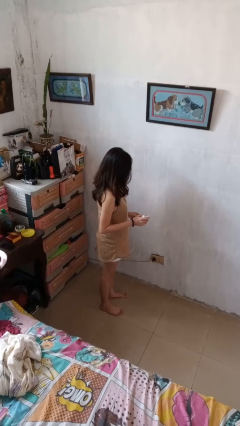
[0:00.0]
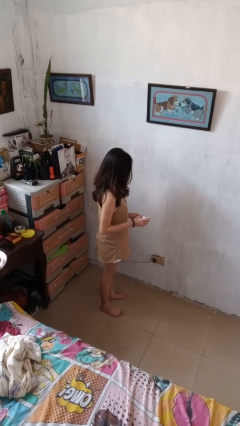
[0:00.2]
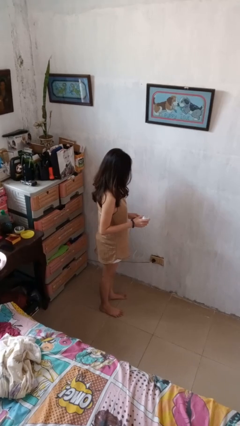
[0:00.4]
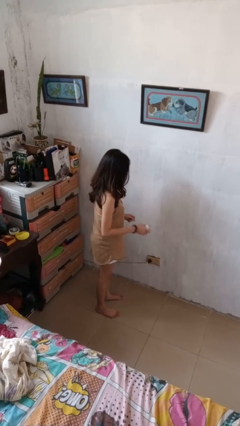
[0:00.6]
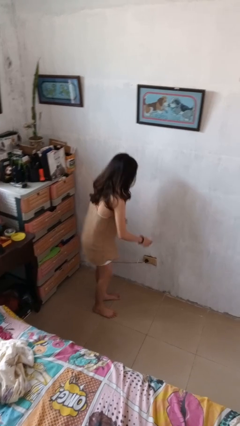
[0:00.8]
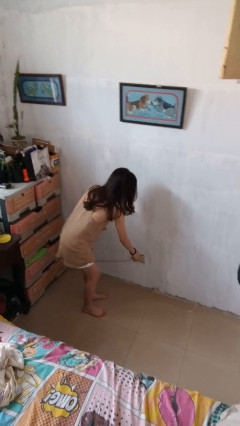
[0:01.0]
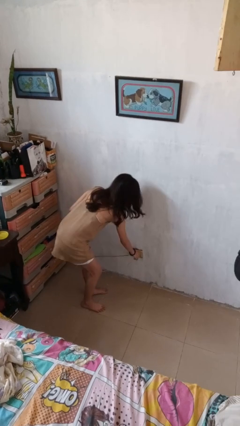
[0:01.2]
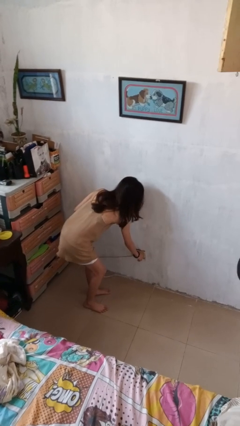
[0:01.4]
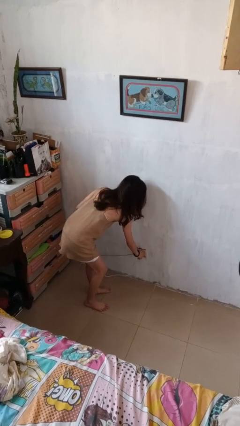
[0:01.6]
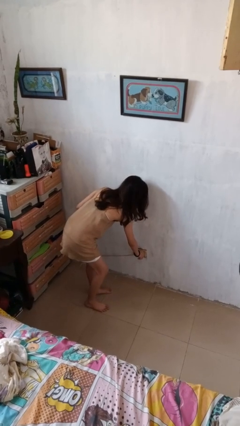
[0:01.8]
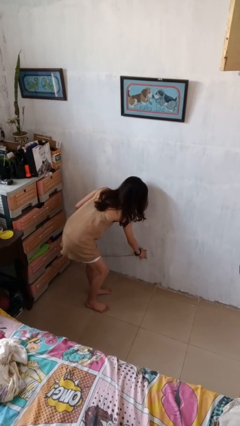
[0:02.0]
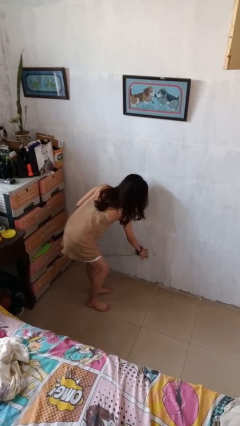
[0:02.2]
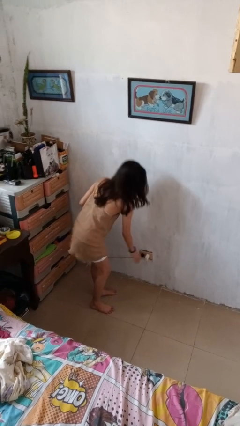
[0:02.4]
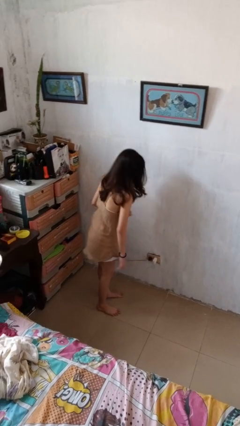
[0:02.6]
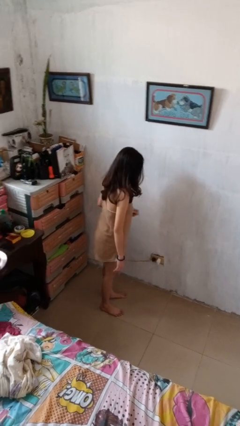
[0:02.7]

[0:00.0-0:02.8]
person plugs into electrical socket

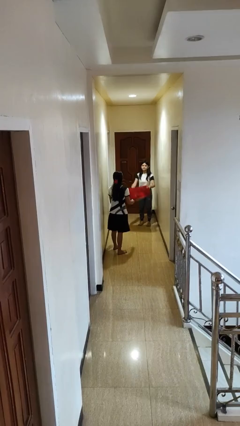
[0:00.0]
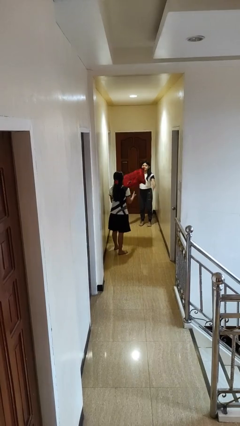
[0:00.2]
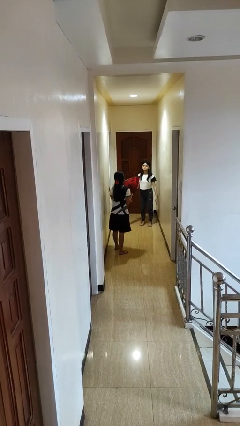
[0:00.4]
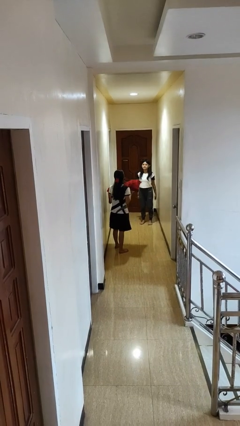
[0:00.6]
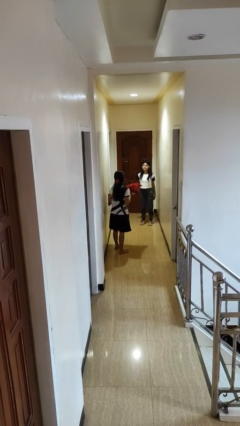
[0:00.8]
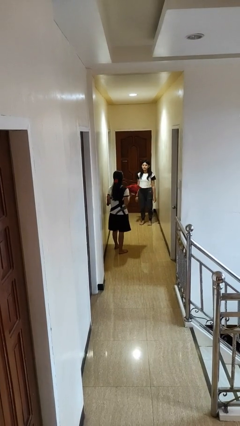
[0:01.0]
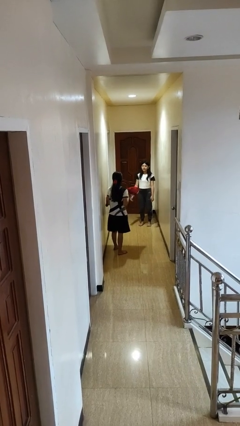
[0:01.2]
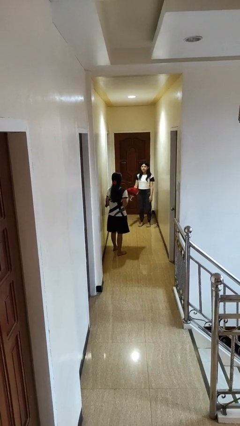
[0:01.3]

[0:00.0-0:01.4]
person catches object from person

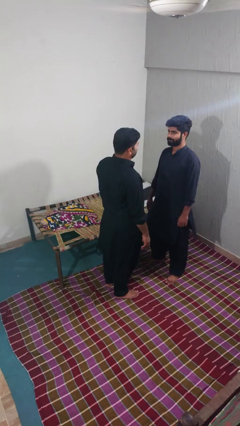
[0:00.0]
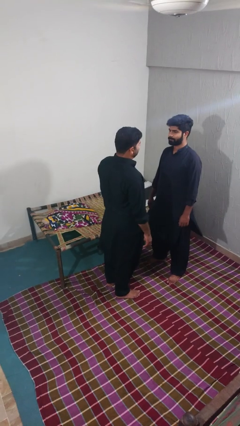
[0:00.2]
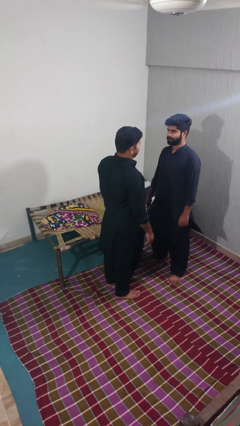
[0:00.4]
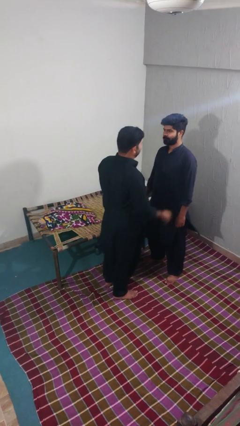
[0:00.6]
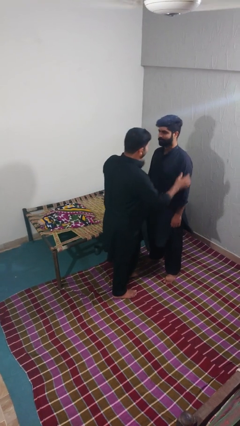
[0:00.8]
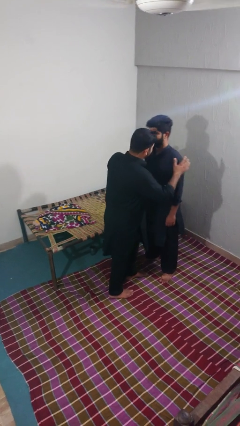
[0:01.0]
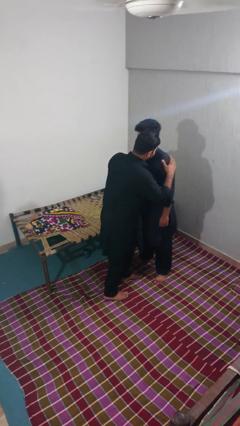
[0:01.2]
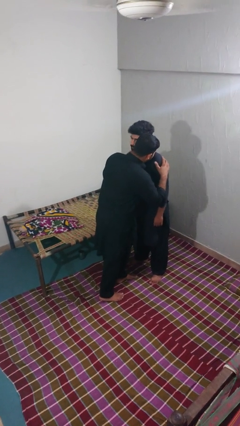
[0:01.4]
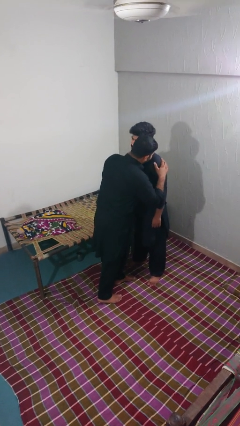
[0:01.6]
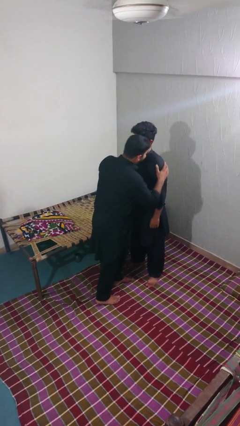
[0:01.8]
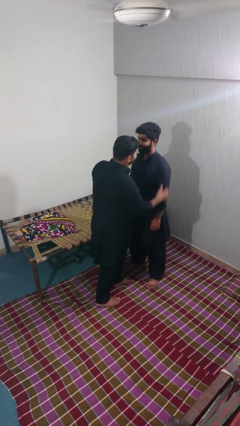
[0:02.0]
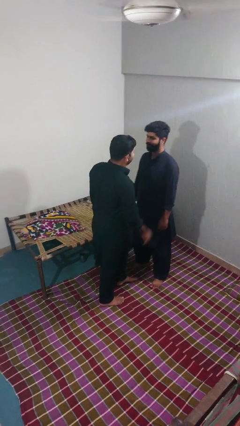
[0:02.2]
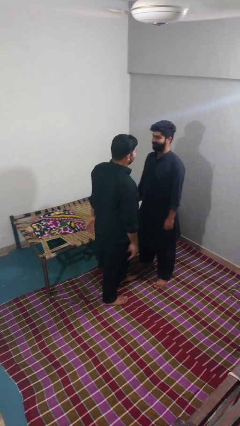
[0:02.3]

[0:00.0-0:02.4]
person kisses cheek of person

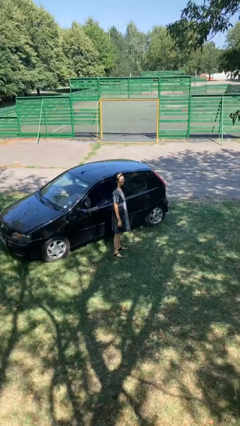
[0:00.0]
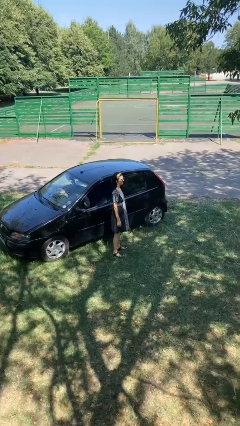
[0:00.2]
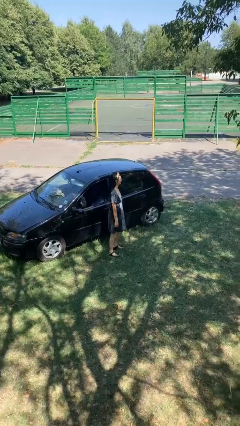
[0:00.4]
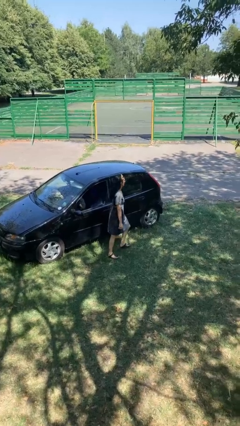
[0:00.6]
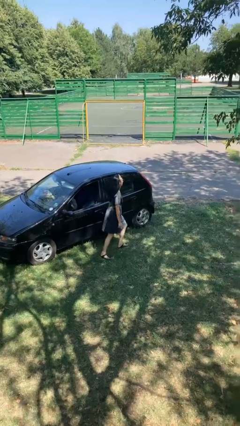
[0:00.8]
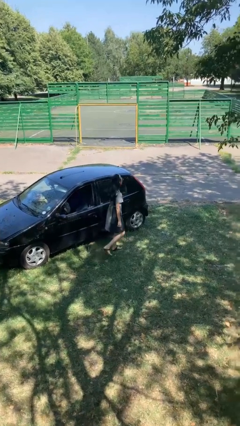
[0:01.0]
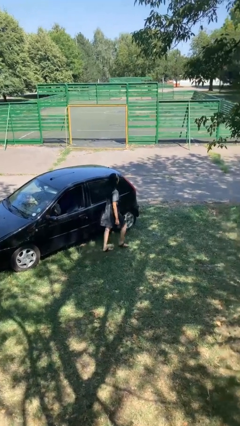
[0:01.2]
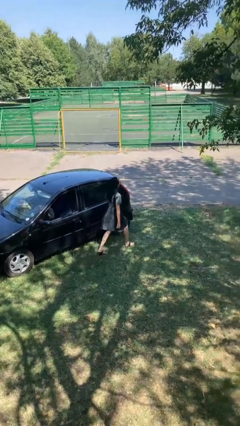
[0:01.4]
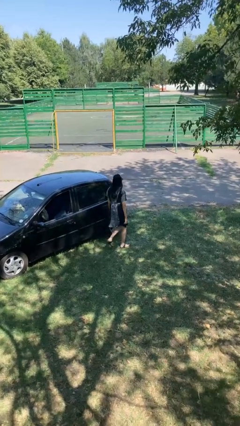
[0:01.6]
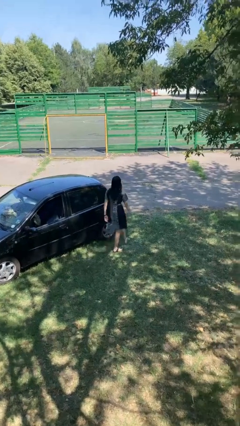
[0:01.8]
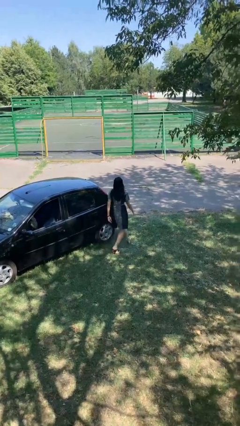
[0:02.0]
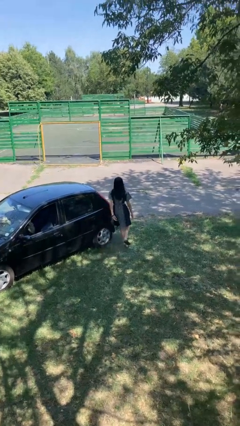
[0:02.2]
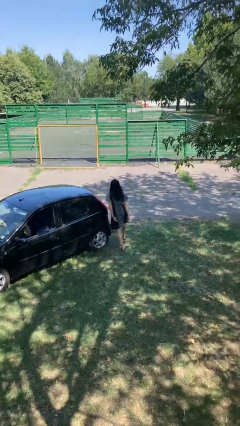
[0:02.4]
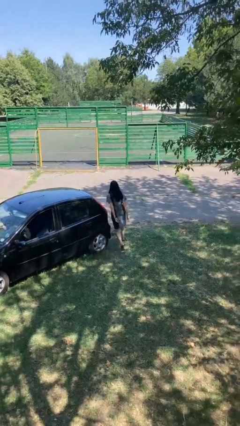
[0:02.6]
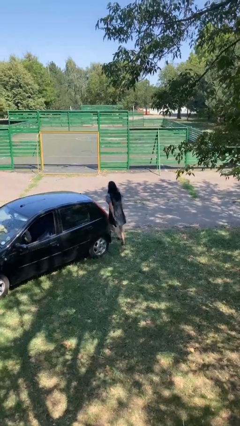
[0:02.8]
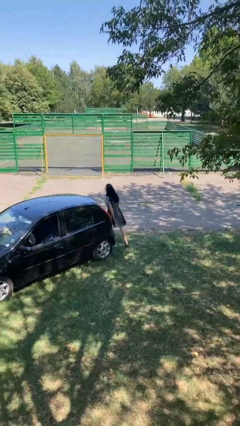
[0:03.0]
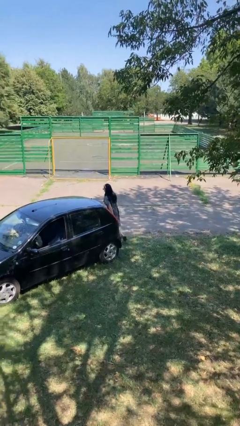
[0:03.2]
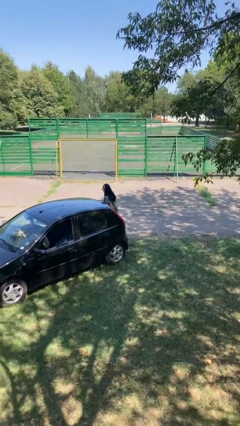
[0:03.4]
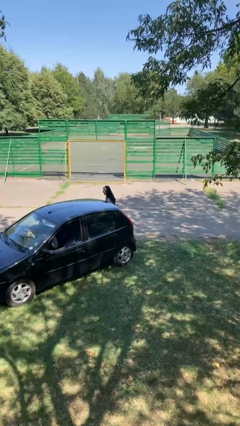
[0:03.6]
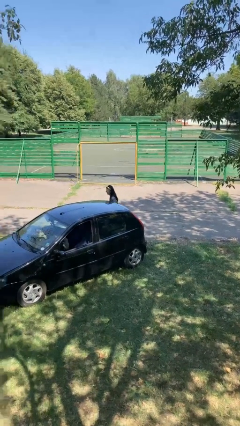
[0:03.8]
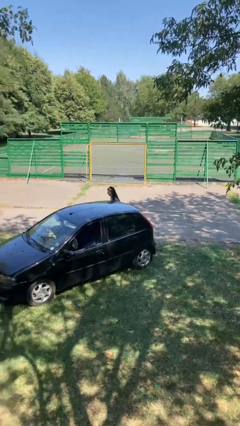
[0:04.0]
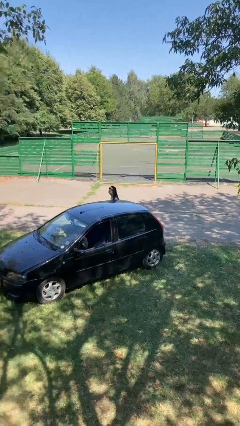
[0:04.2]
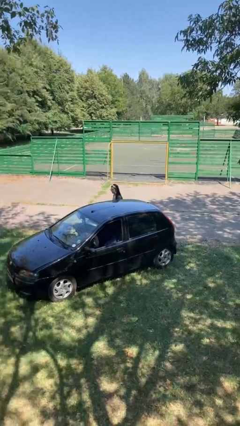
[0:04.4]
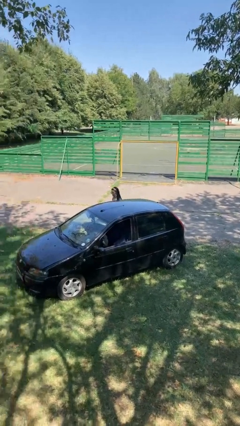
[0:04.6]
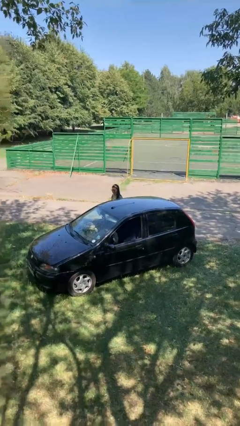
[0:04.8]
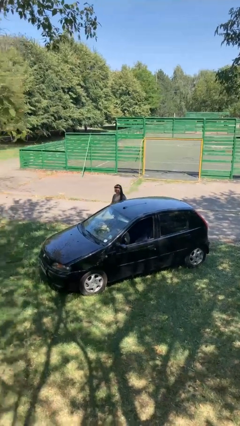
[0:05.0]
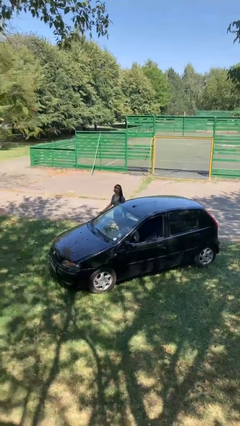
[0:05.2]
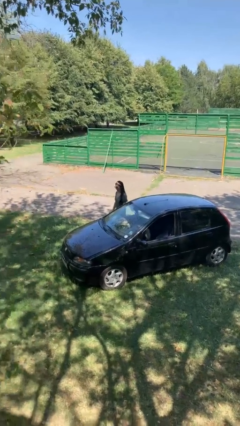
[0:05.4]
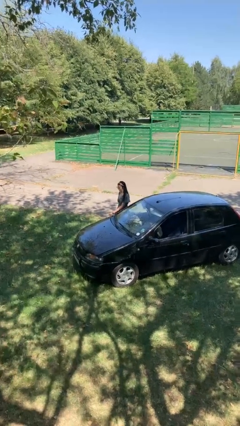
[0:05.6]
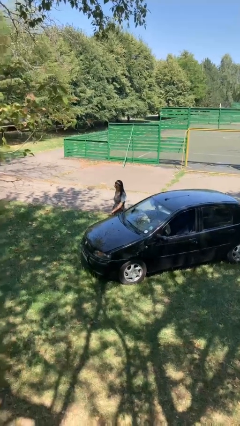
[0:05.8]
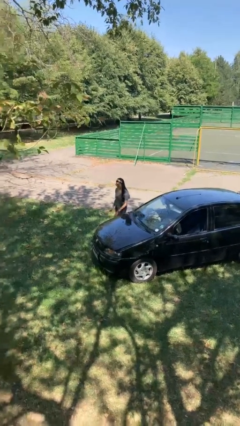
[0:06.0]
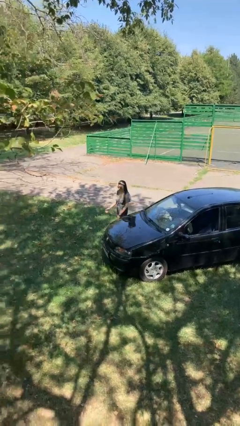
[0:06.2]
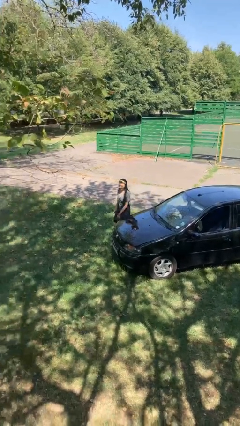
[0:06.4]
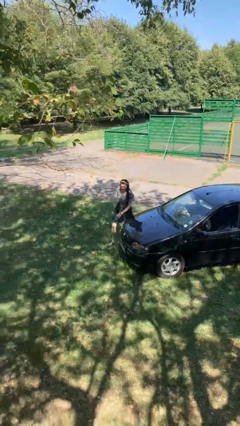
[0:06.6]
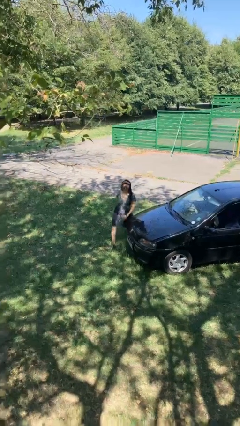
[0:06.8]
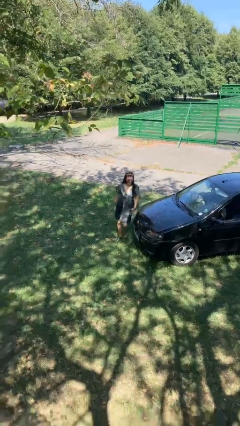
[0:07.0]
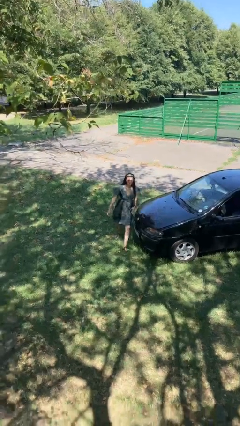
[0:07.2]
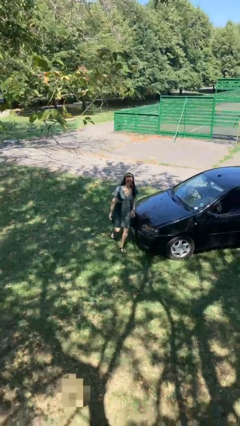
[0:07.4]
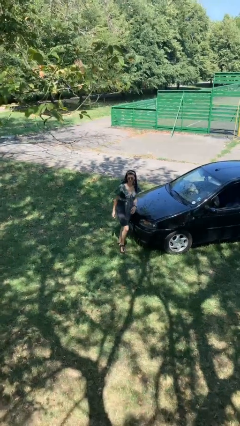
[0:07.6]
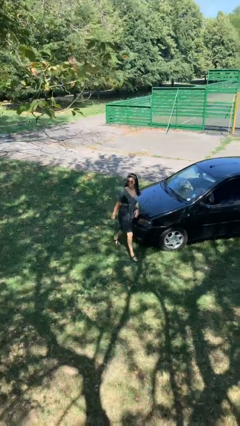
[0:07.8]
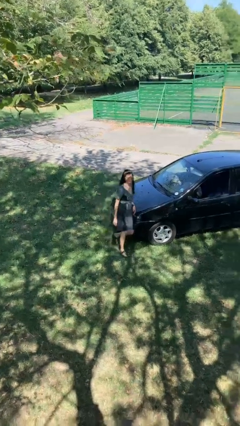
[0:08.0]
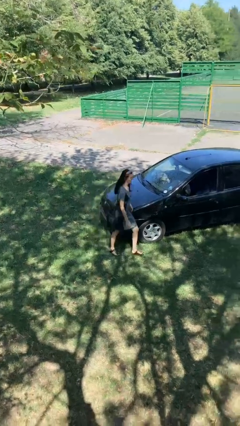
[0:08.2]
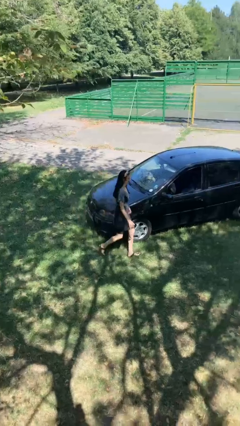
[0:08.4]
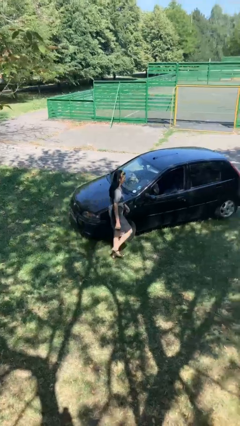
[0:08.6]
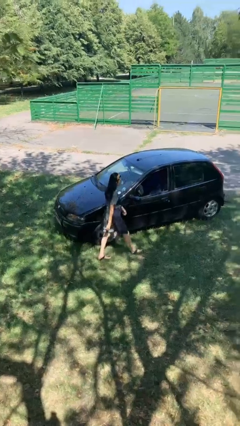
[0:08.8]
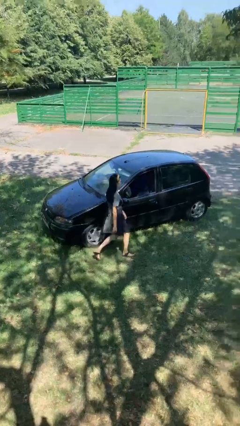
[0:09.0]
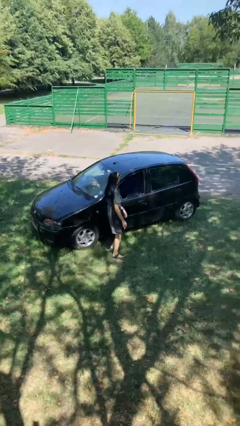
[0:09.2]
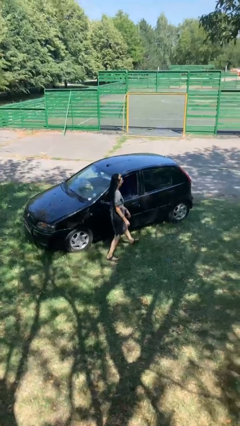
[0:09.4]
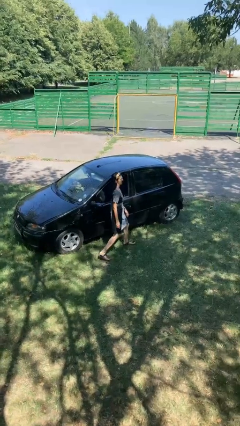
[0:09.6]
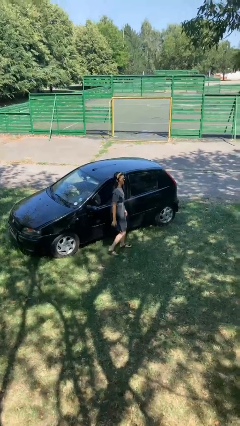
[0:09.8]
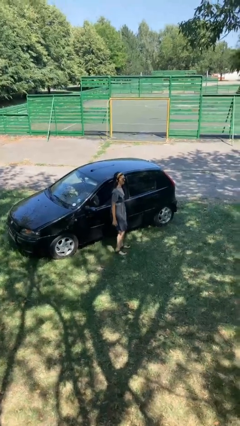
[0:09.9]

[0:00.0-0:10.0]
person walks around car

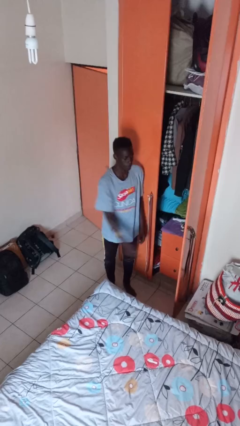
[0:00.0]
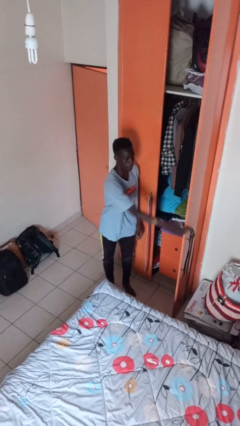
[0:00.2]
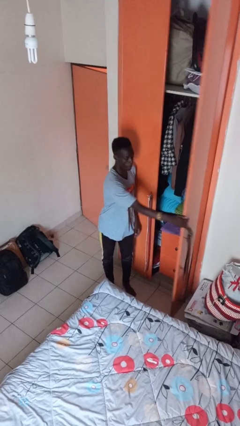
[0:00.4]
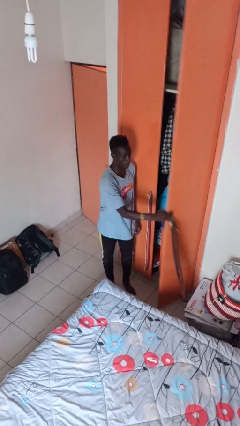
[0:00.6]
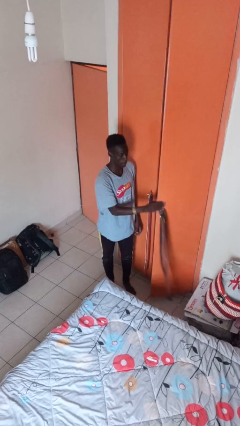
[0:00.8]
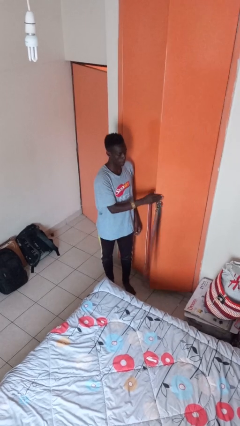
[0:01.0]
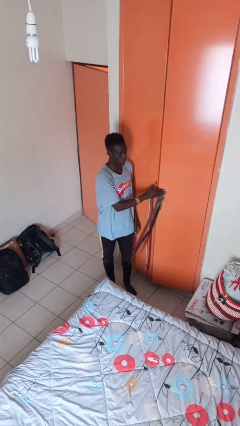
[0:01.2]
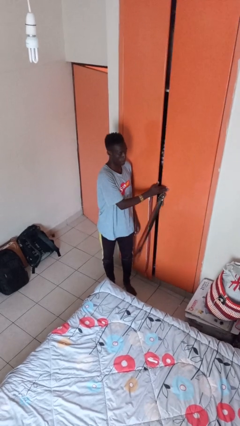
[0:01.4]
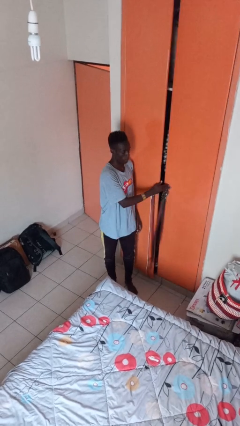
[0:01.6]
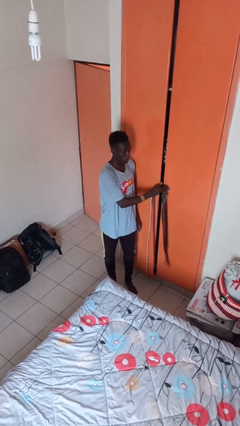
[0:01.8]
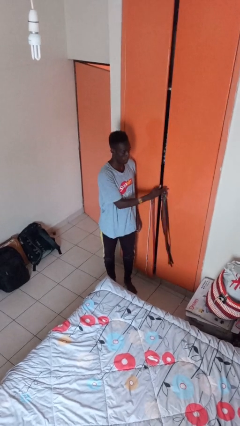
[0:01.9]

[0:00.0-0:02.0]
person closes closet door
